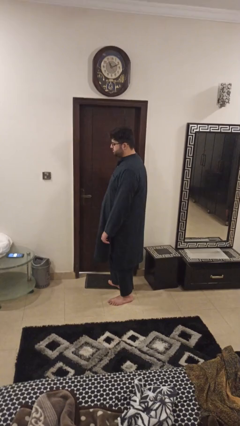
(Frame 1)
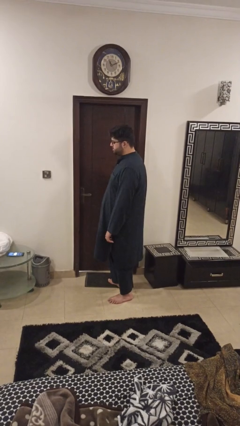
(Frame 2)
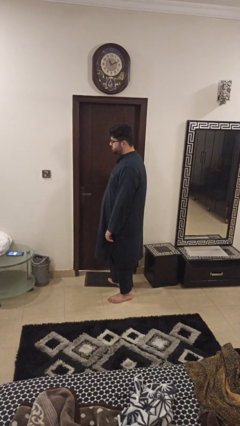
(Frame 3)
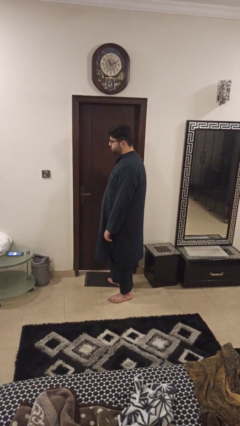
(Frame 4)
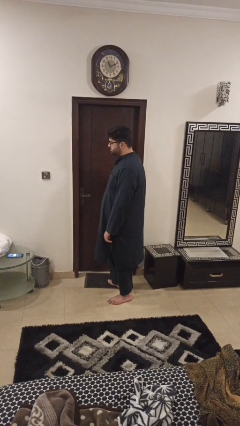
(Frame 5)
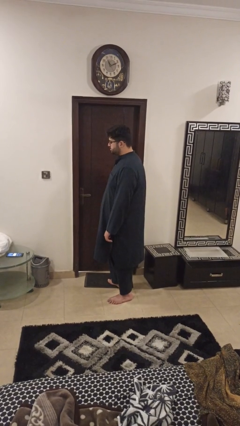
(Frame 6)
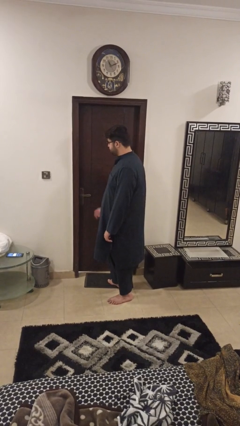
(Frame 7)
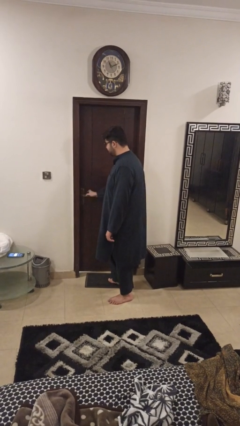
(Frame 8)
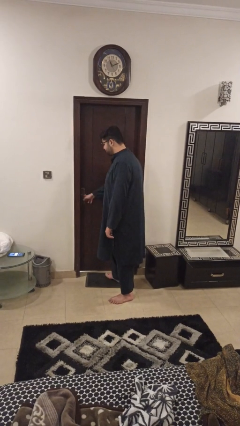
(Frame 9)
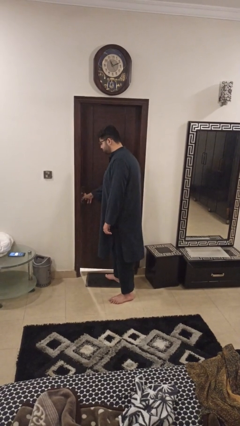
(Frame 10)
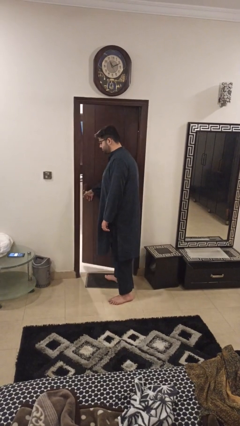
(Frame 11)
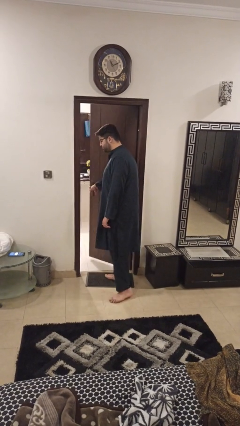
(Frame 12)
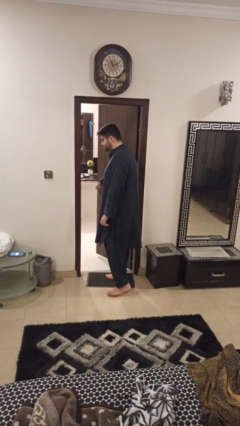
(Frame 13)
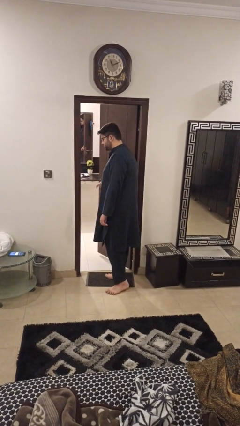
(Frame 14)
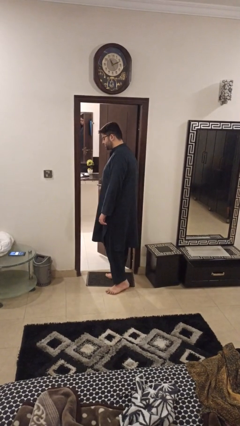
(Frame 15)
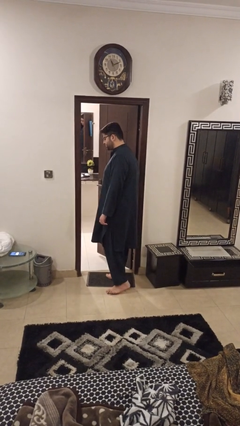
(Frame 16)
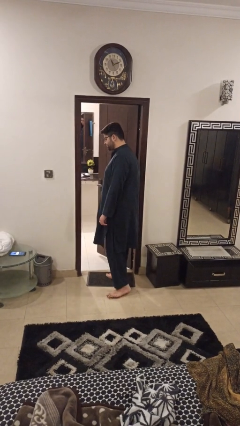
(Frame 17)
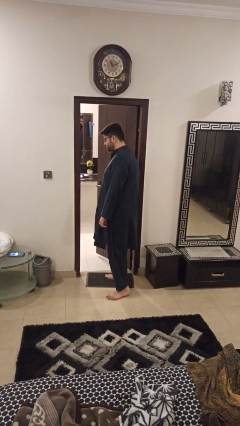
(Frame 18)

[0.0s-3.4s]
person opens facility door

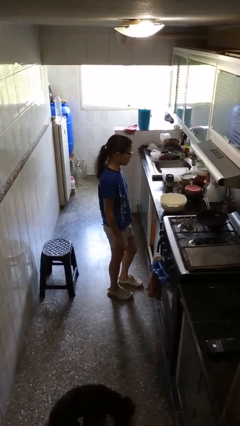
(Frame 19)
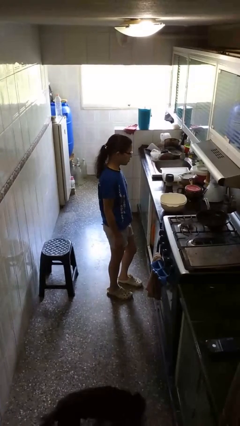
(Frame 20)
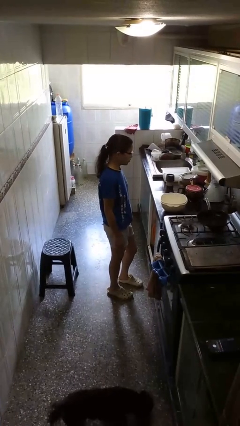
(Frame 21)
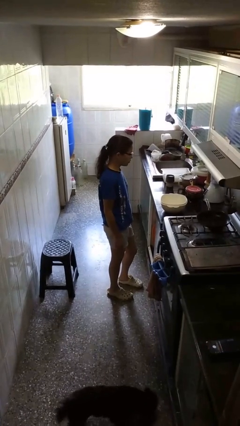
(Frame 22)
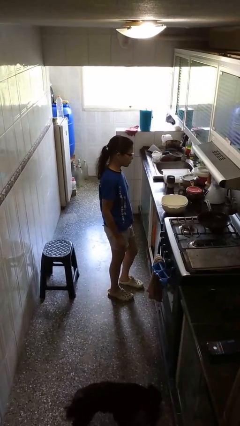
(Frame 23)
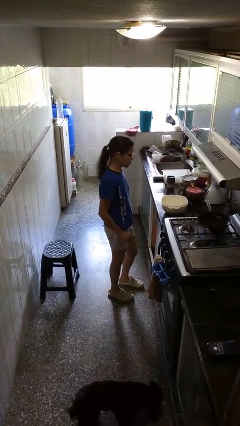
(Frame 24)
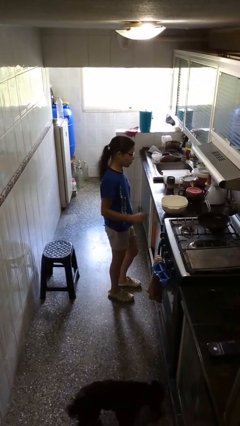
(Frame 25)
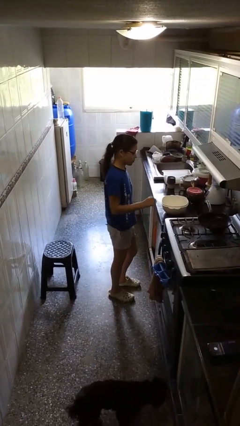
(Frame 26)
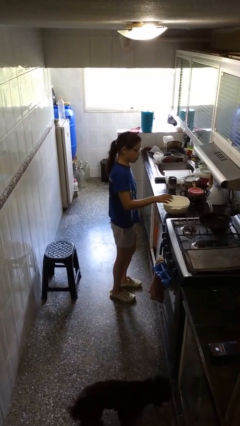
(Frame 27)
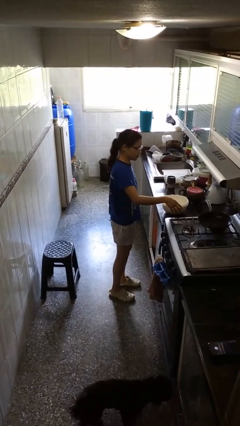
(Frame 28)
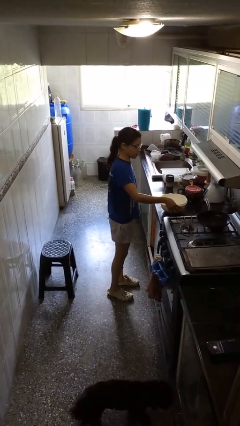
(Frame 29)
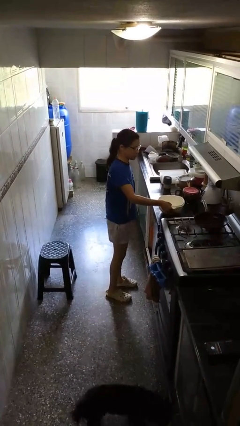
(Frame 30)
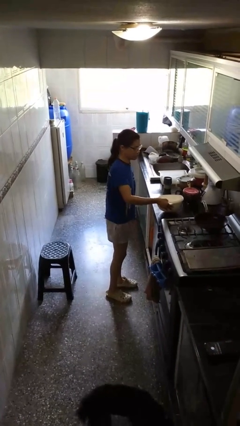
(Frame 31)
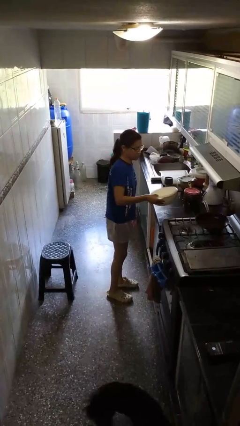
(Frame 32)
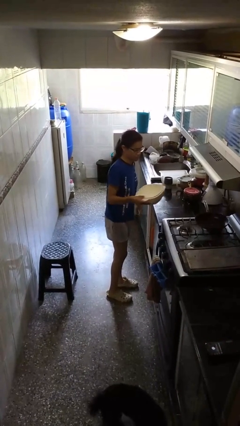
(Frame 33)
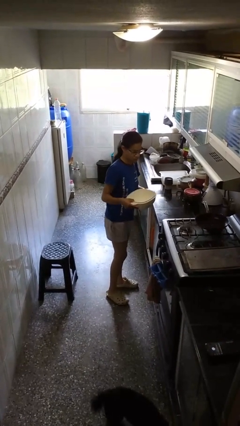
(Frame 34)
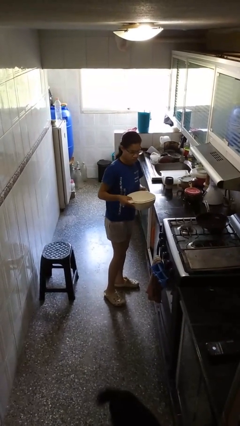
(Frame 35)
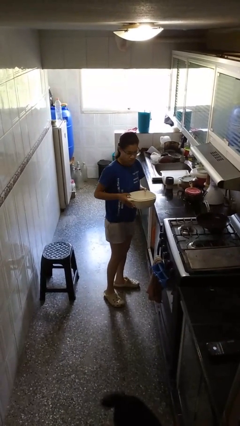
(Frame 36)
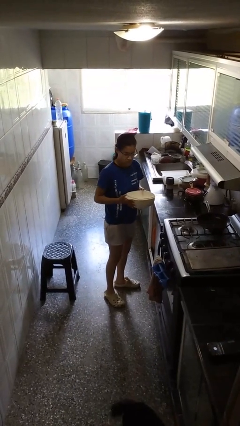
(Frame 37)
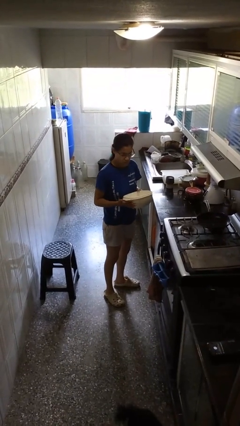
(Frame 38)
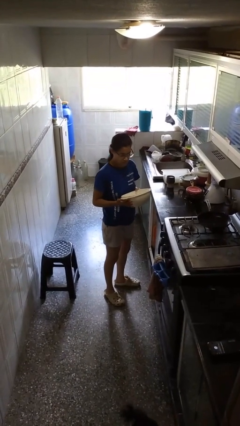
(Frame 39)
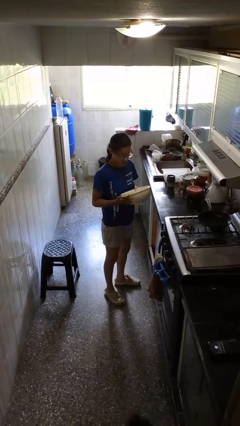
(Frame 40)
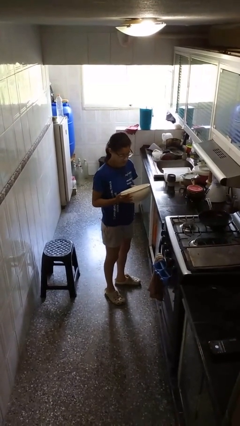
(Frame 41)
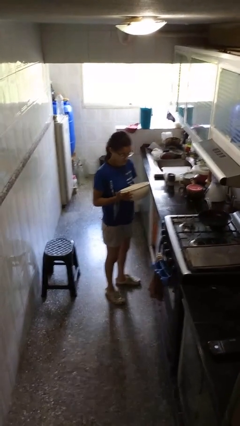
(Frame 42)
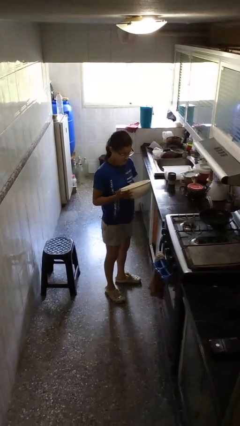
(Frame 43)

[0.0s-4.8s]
person picks up object from countertop

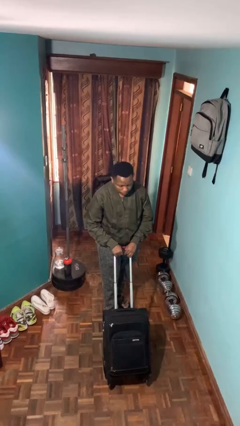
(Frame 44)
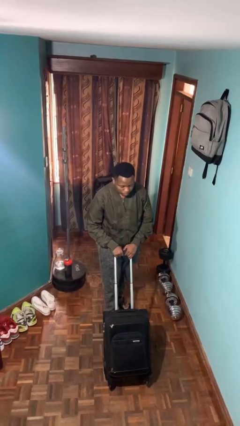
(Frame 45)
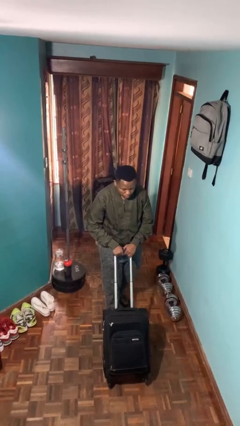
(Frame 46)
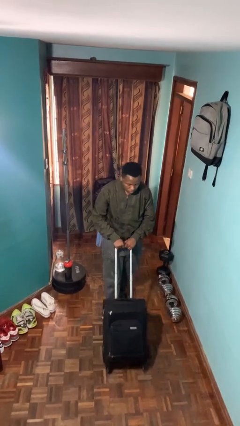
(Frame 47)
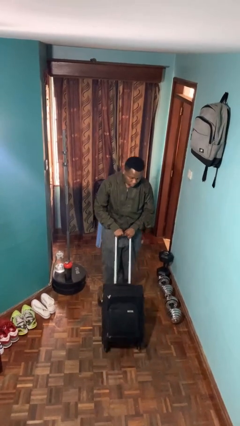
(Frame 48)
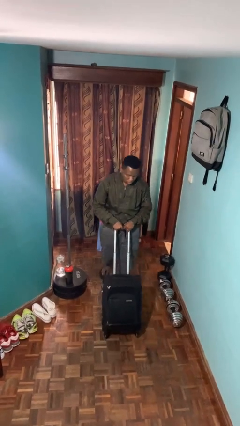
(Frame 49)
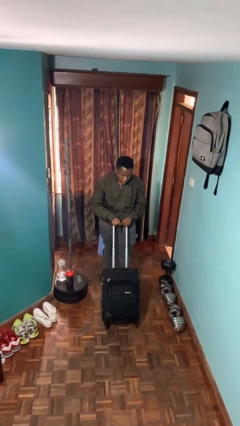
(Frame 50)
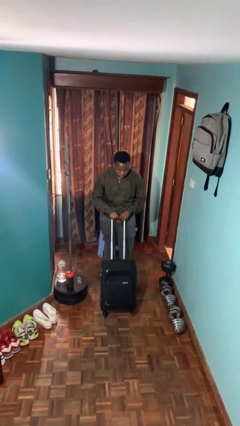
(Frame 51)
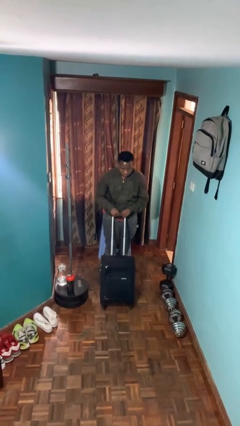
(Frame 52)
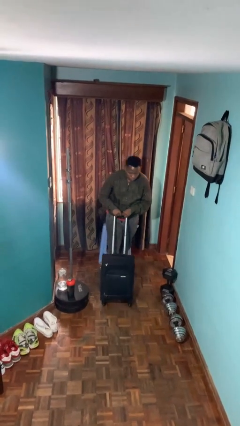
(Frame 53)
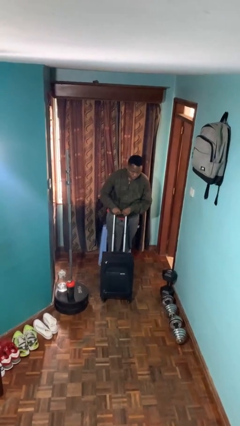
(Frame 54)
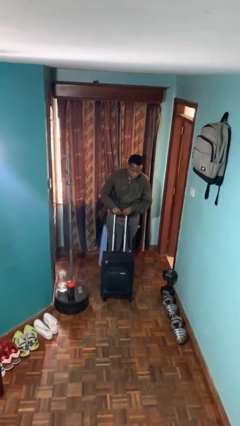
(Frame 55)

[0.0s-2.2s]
person pulls wheeled cart

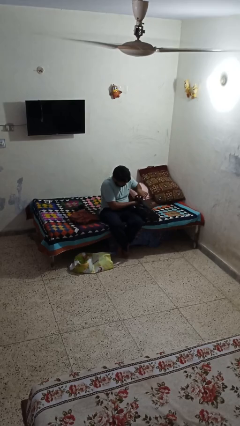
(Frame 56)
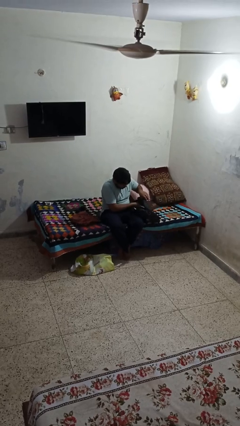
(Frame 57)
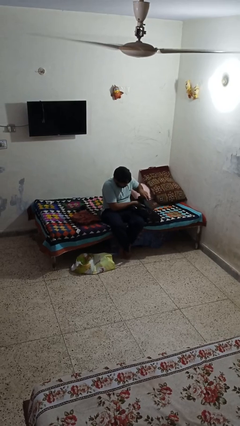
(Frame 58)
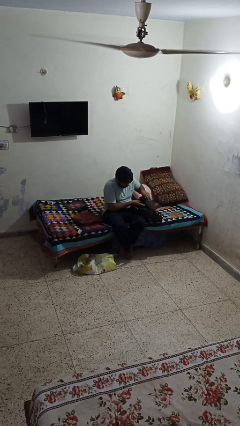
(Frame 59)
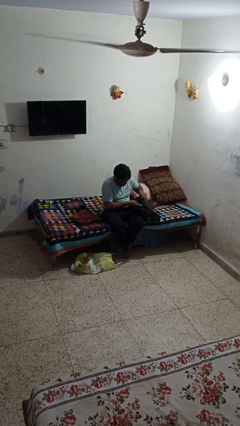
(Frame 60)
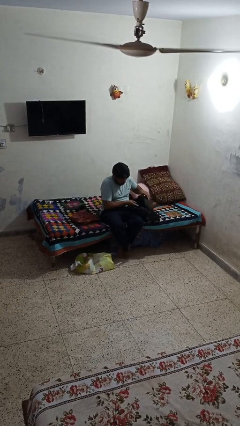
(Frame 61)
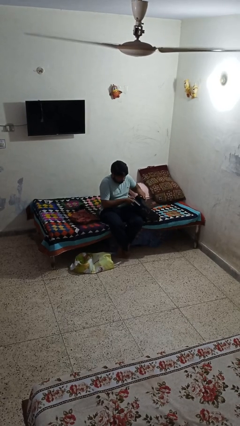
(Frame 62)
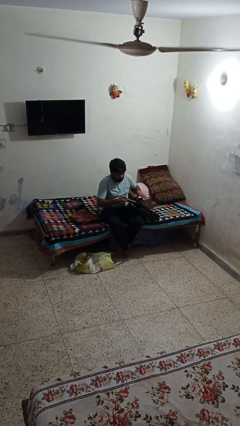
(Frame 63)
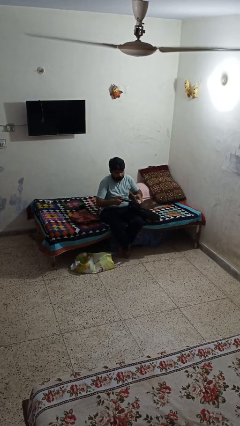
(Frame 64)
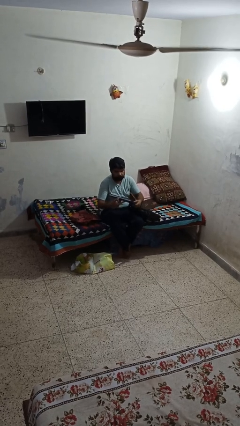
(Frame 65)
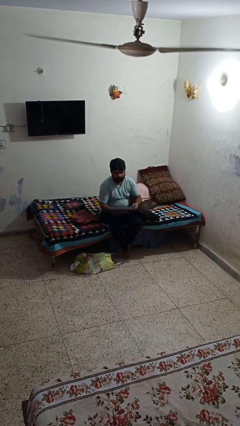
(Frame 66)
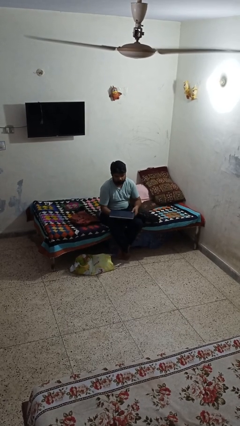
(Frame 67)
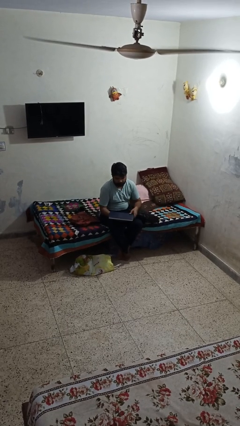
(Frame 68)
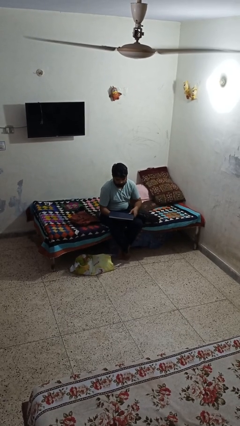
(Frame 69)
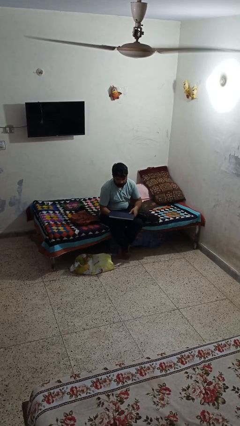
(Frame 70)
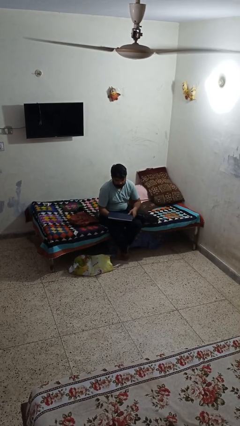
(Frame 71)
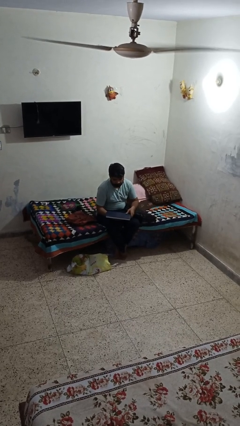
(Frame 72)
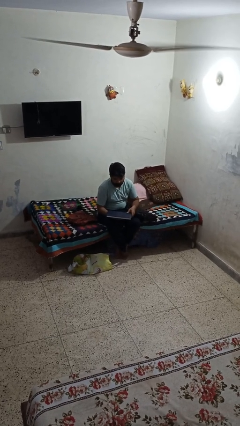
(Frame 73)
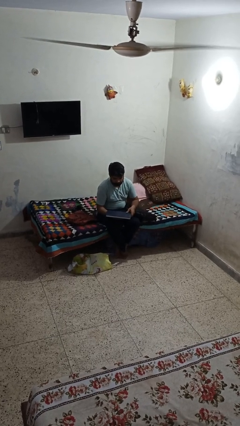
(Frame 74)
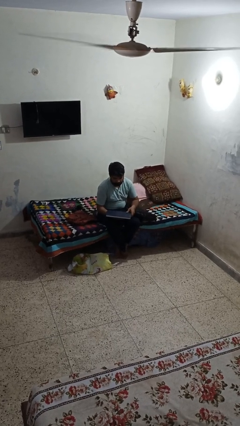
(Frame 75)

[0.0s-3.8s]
person takes object from backpack

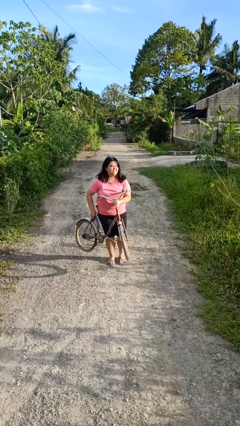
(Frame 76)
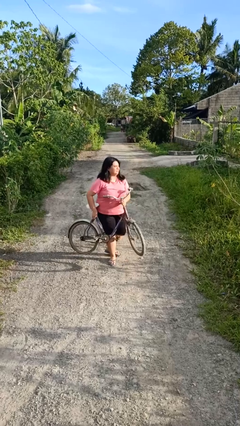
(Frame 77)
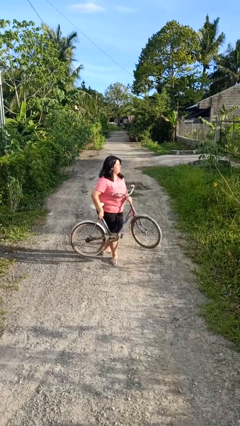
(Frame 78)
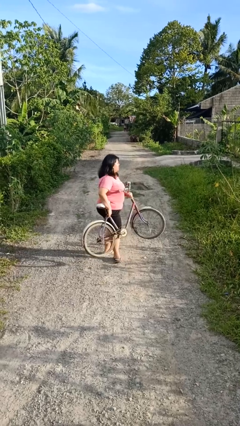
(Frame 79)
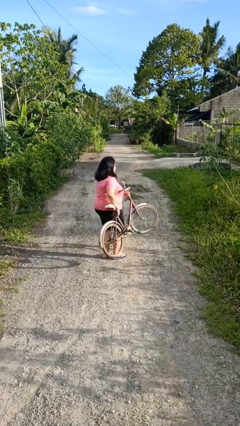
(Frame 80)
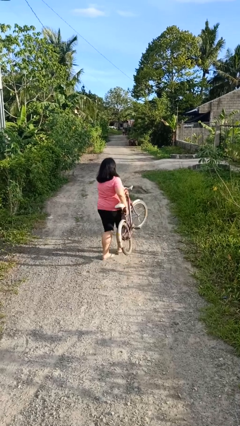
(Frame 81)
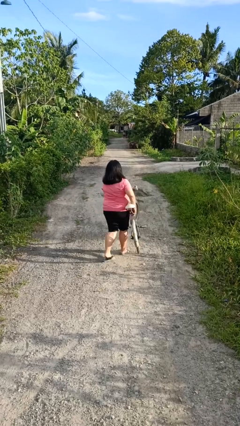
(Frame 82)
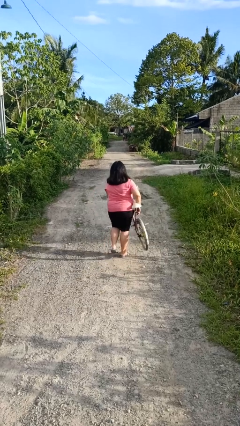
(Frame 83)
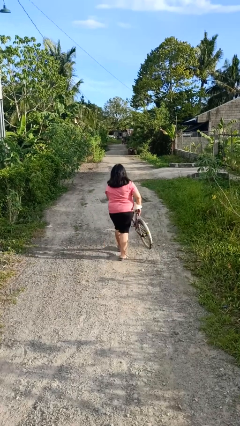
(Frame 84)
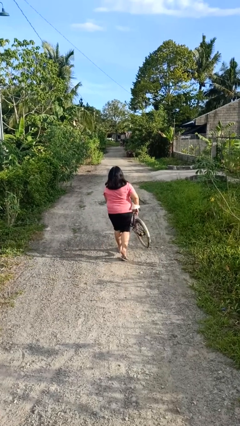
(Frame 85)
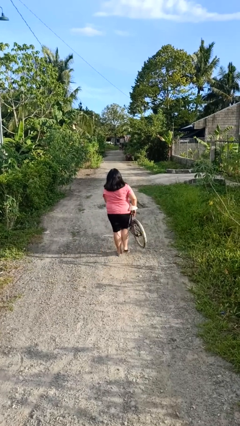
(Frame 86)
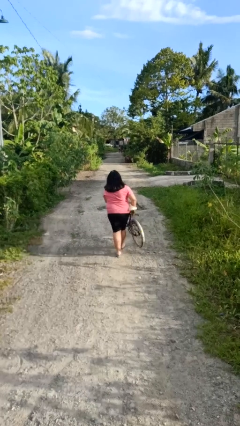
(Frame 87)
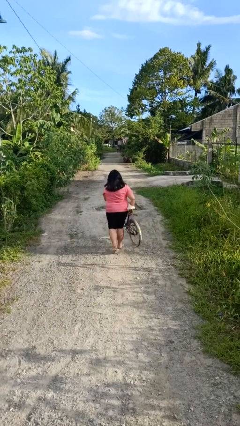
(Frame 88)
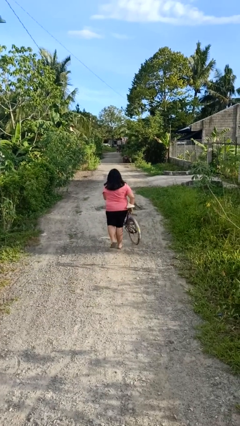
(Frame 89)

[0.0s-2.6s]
person carries bicycle

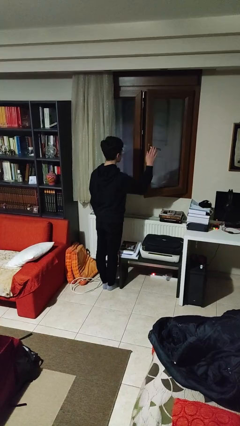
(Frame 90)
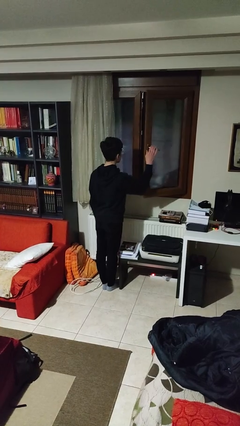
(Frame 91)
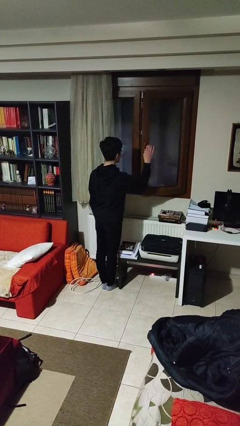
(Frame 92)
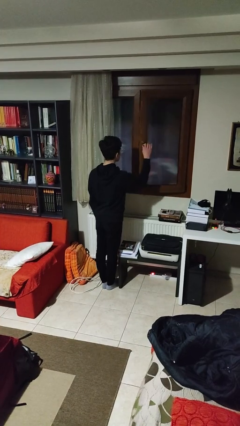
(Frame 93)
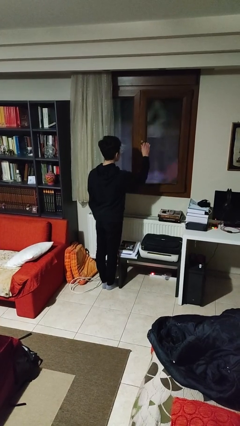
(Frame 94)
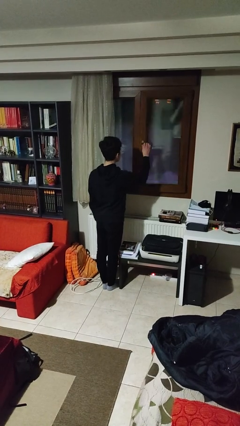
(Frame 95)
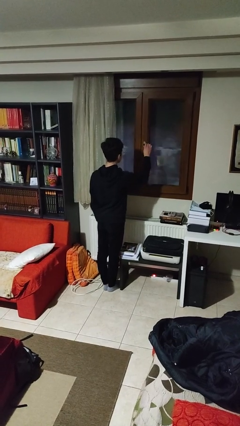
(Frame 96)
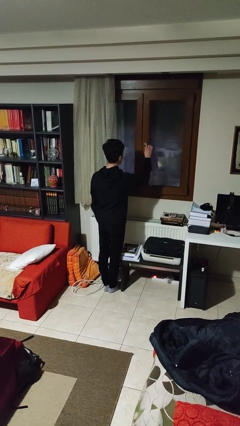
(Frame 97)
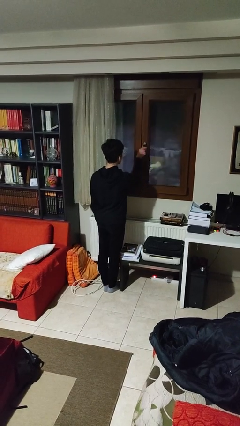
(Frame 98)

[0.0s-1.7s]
person closes home window
